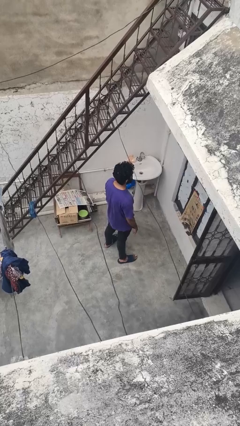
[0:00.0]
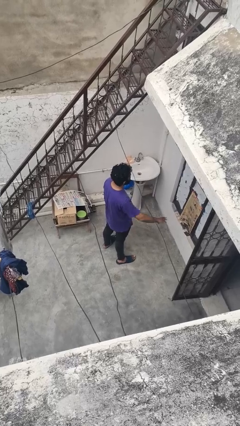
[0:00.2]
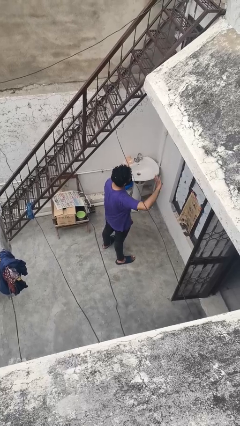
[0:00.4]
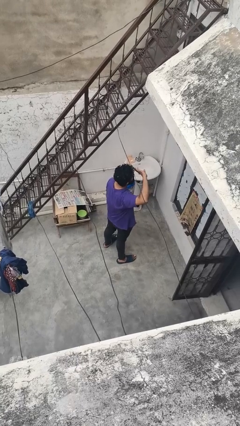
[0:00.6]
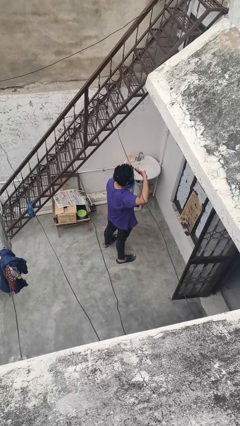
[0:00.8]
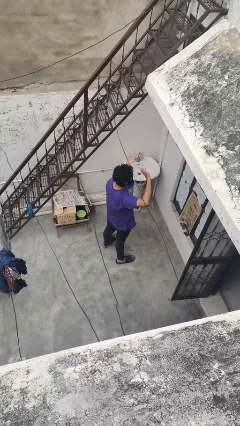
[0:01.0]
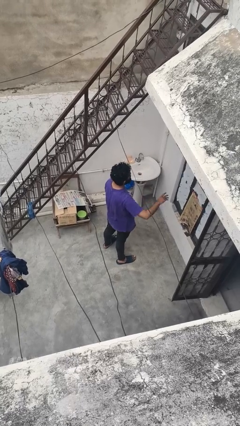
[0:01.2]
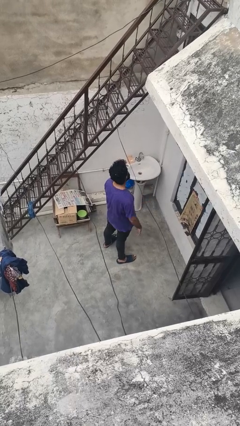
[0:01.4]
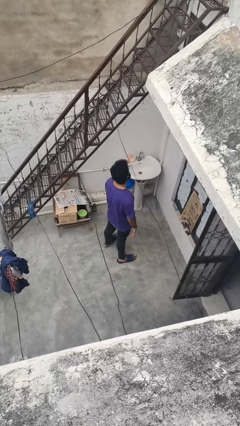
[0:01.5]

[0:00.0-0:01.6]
person salutes

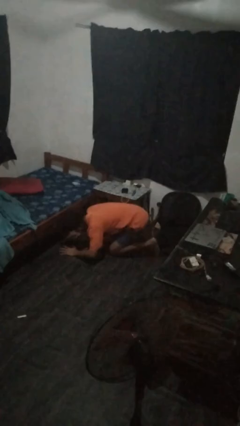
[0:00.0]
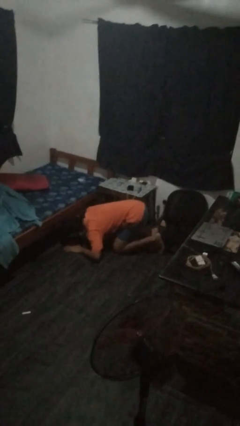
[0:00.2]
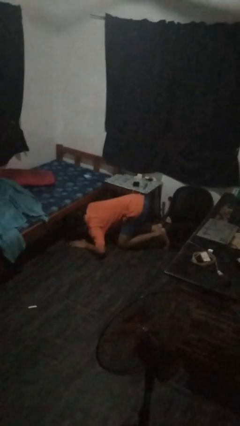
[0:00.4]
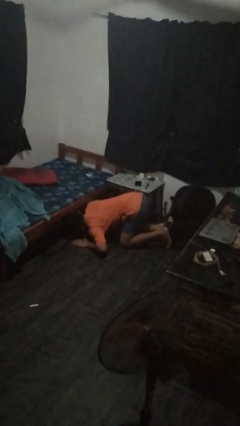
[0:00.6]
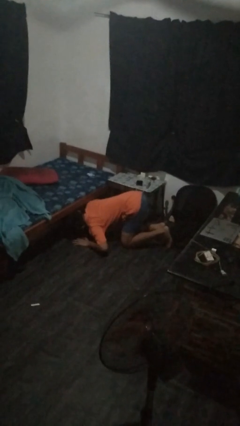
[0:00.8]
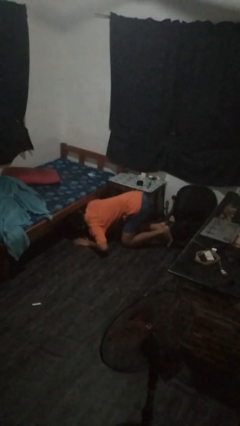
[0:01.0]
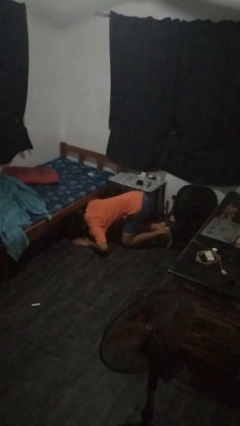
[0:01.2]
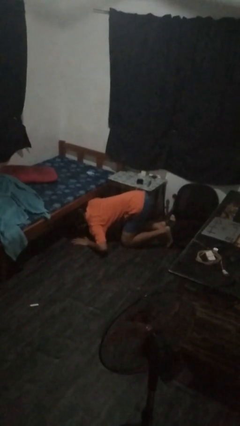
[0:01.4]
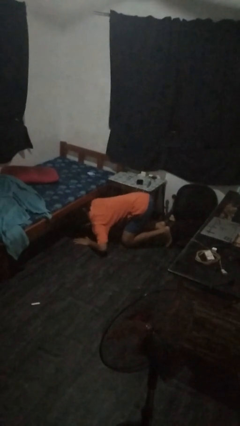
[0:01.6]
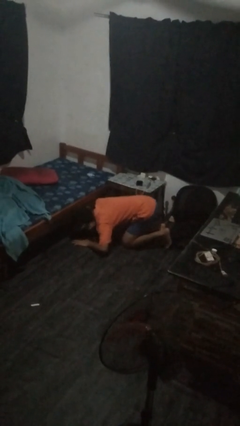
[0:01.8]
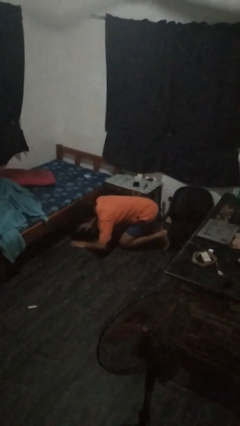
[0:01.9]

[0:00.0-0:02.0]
person searches under bed

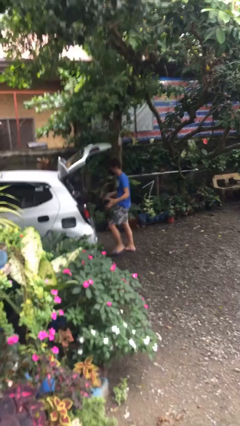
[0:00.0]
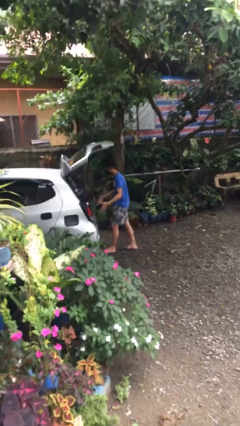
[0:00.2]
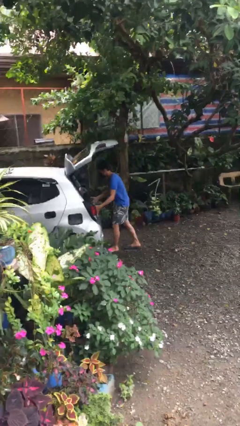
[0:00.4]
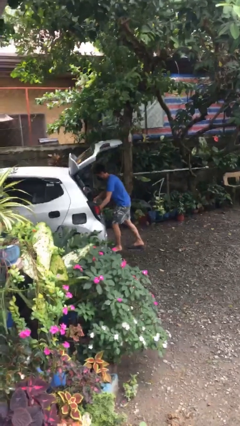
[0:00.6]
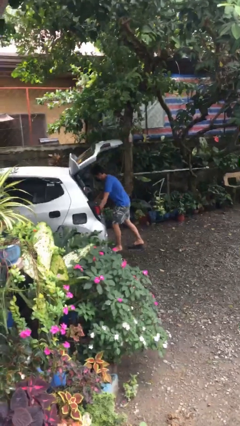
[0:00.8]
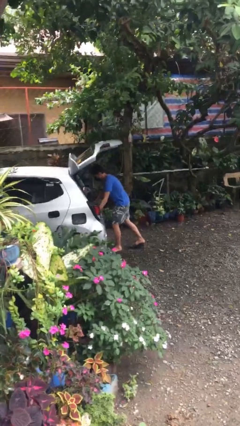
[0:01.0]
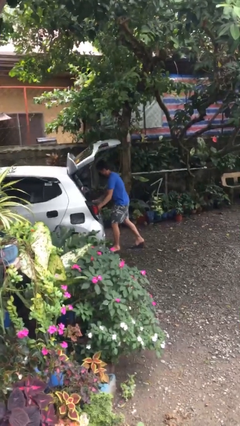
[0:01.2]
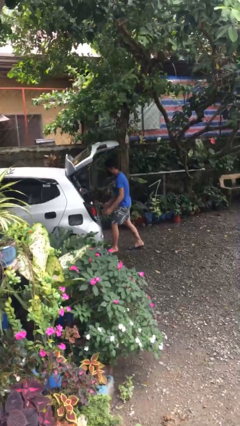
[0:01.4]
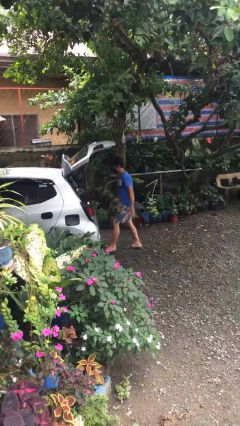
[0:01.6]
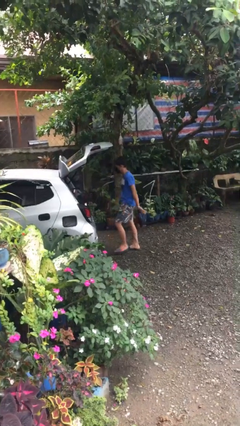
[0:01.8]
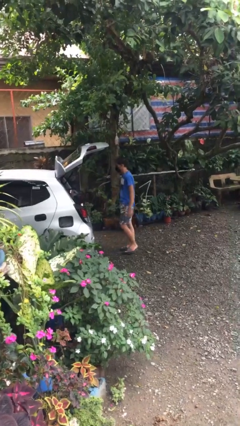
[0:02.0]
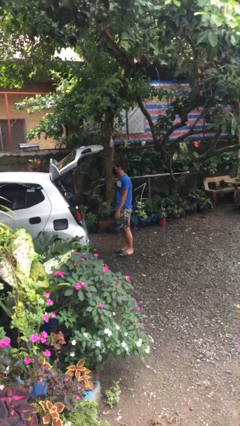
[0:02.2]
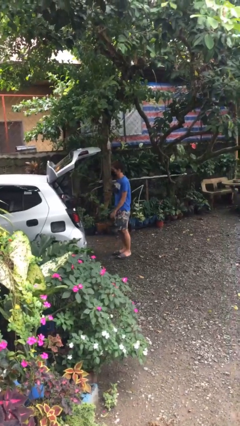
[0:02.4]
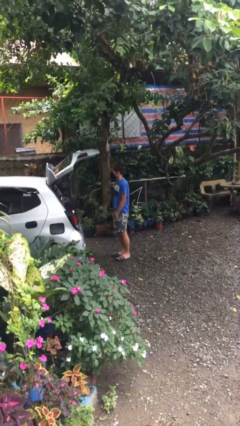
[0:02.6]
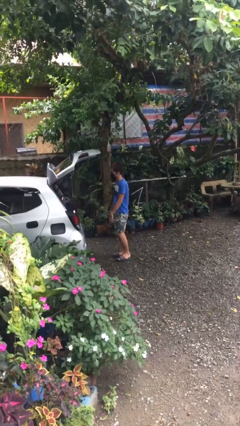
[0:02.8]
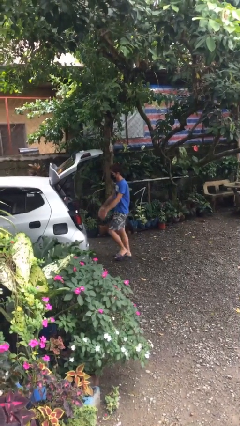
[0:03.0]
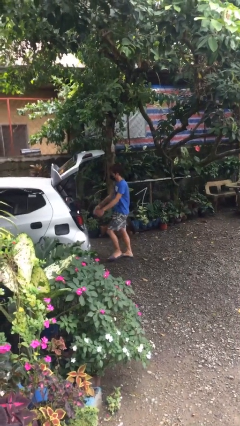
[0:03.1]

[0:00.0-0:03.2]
person loads car

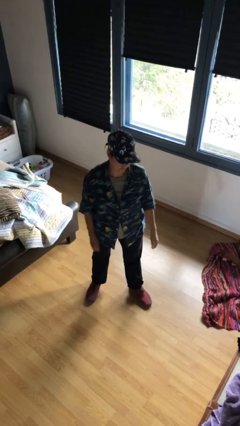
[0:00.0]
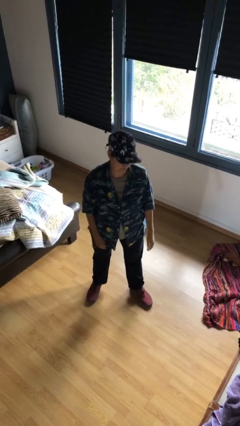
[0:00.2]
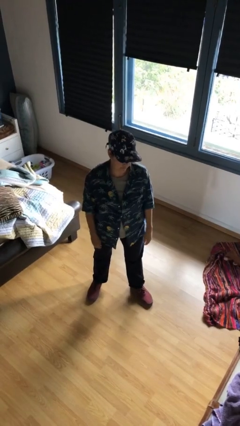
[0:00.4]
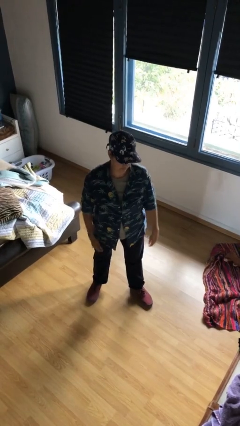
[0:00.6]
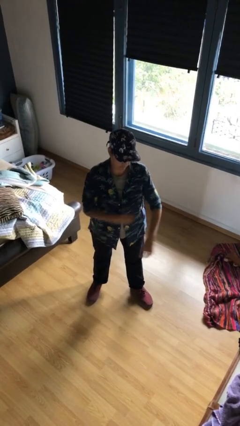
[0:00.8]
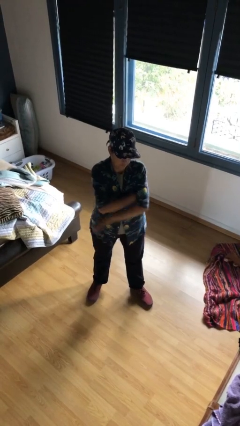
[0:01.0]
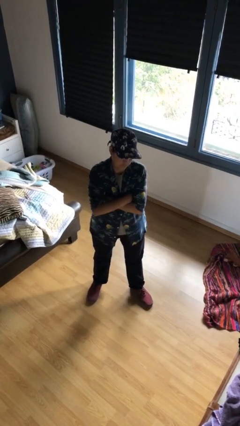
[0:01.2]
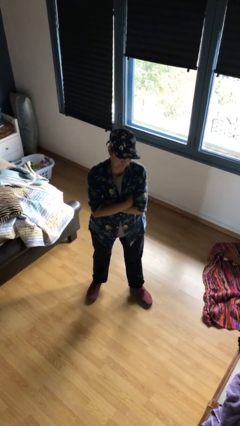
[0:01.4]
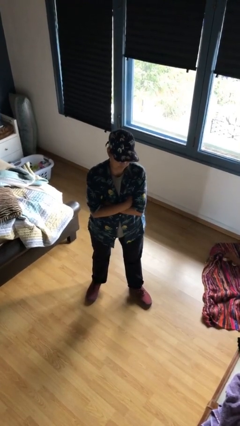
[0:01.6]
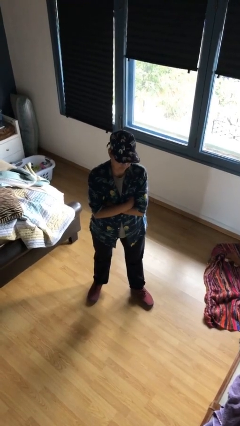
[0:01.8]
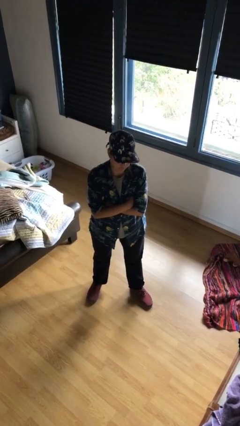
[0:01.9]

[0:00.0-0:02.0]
person crosses arms

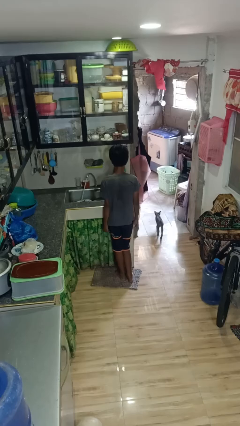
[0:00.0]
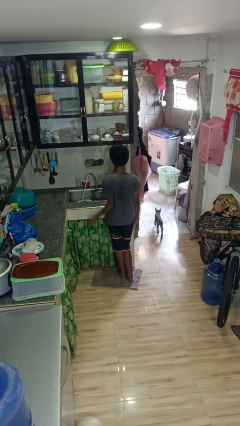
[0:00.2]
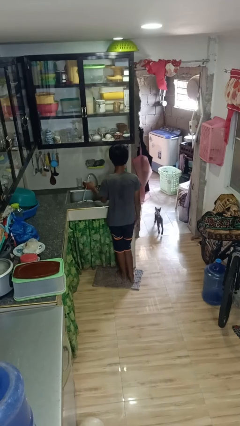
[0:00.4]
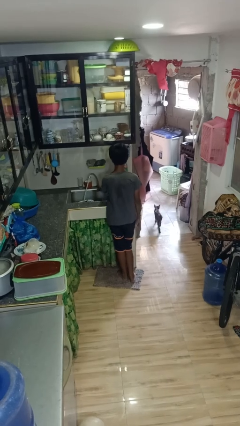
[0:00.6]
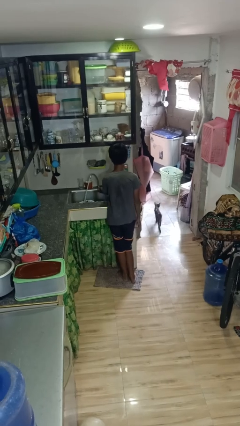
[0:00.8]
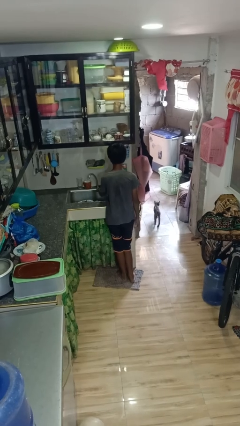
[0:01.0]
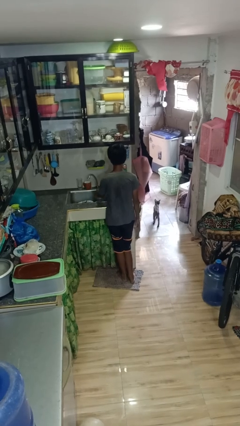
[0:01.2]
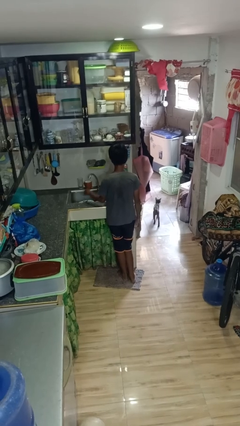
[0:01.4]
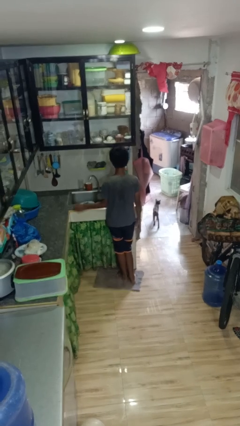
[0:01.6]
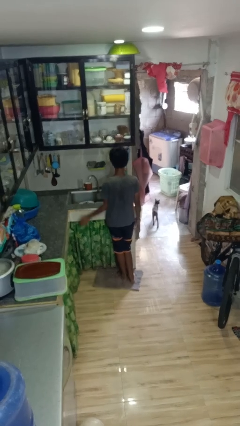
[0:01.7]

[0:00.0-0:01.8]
person turns off faucet

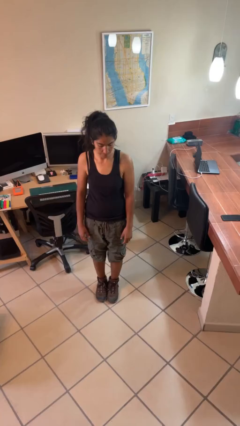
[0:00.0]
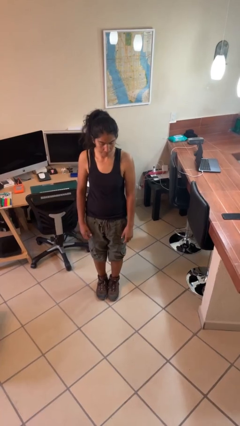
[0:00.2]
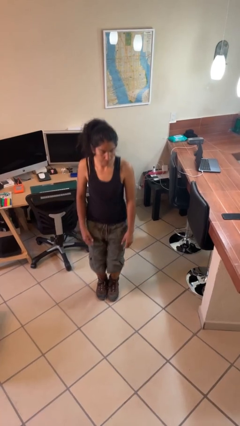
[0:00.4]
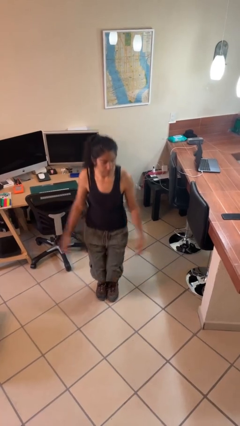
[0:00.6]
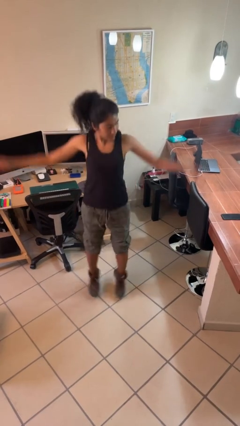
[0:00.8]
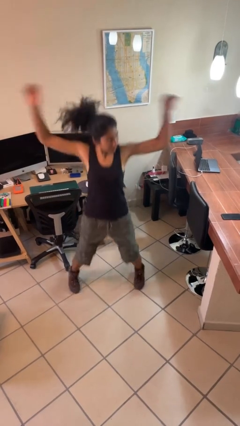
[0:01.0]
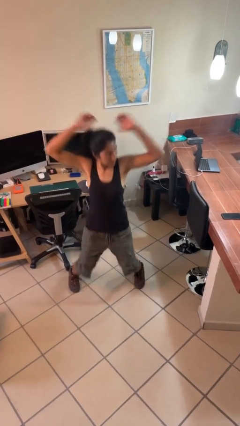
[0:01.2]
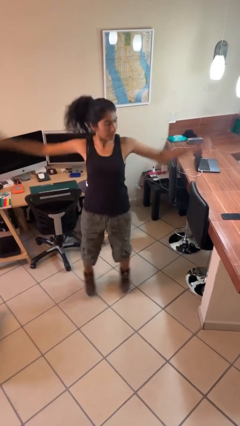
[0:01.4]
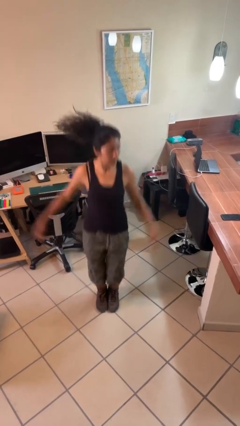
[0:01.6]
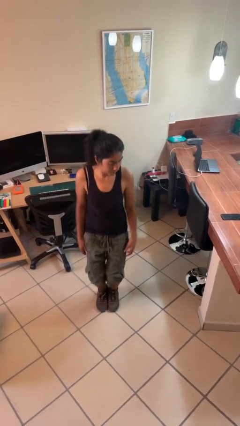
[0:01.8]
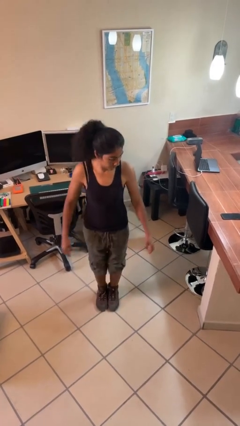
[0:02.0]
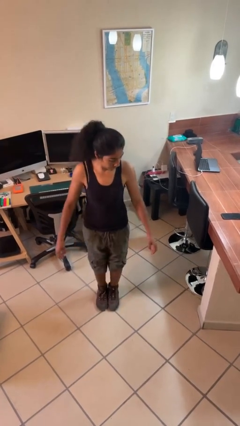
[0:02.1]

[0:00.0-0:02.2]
person exercises with jumping jacks

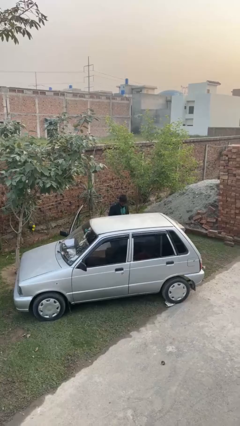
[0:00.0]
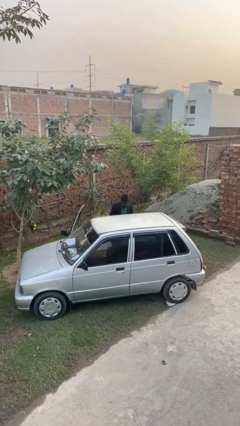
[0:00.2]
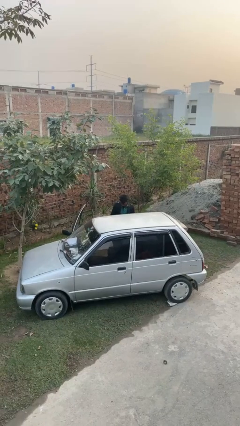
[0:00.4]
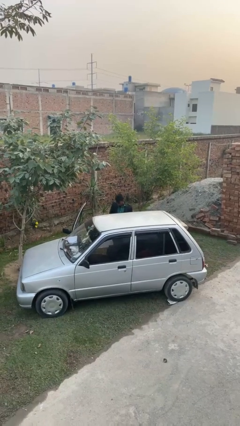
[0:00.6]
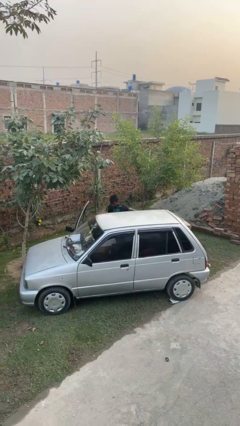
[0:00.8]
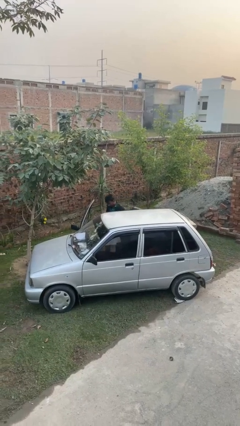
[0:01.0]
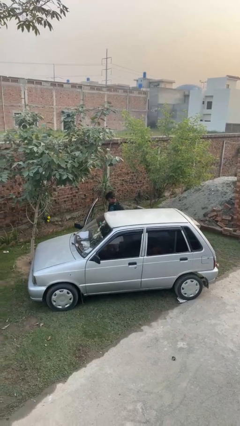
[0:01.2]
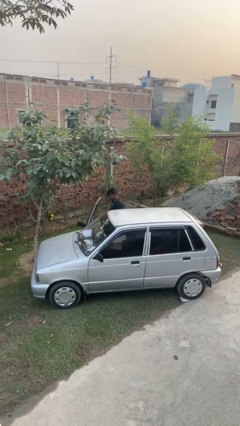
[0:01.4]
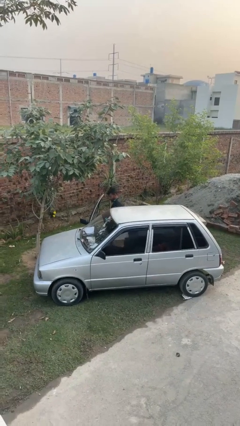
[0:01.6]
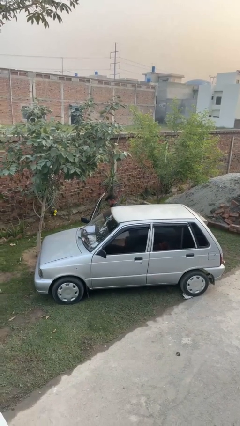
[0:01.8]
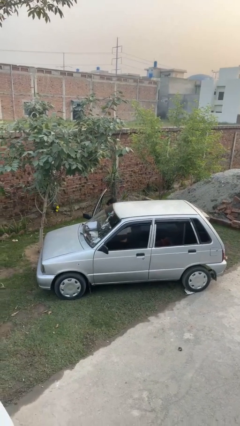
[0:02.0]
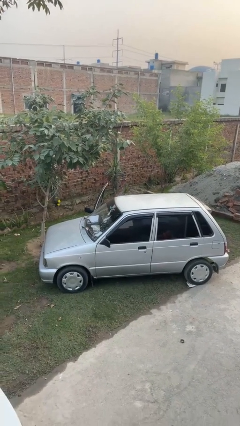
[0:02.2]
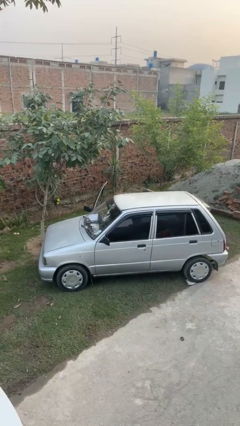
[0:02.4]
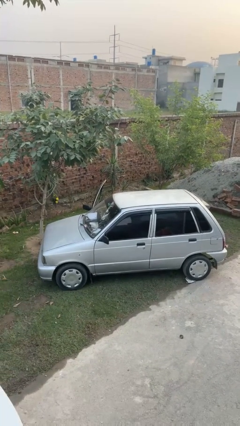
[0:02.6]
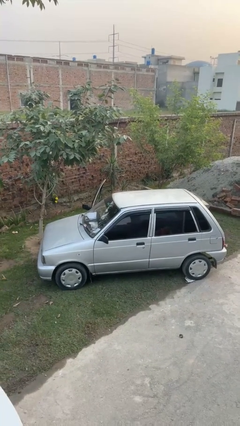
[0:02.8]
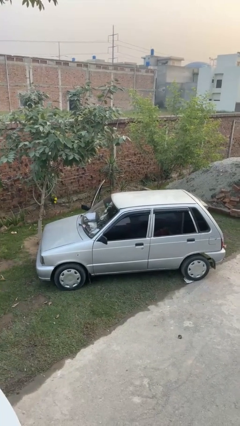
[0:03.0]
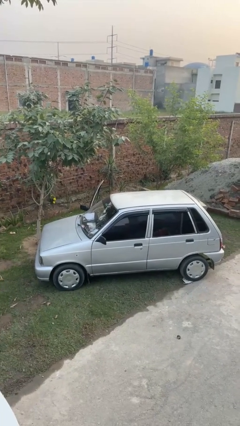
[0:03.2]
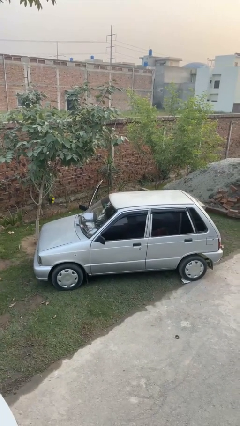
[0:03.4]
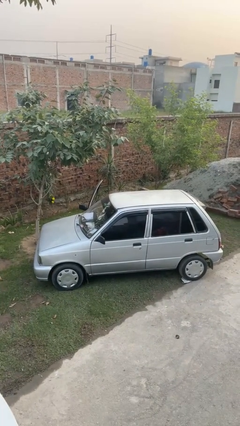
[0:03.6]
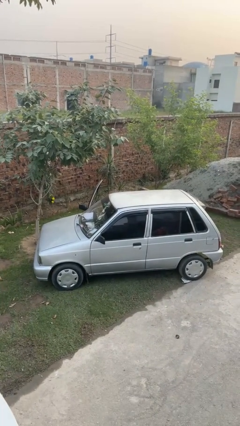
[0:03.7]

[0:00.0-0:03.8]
person enters car

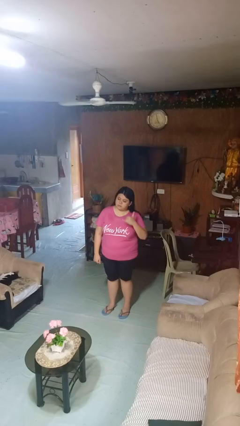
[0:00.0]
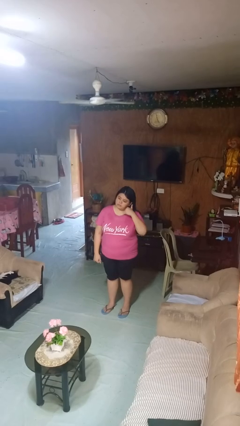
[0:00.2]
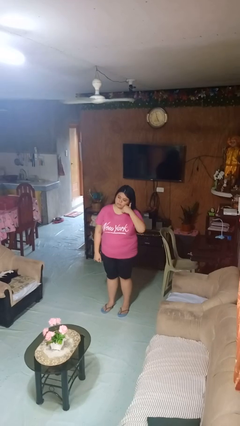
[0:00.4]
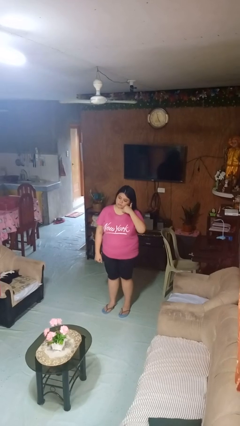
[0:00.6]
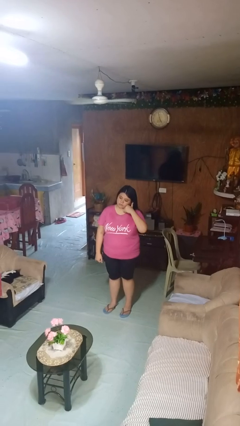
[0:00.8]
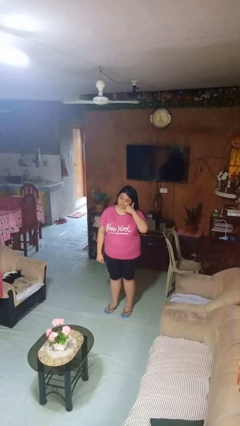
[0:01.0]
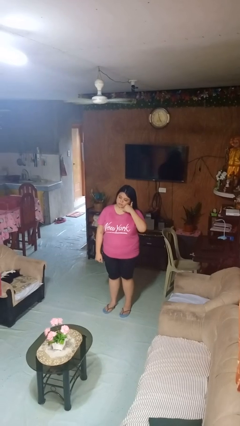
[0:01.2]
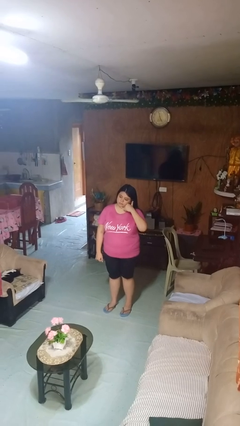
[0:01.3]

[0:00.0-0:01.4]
person gestures call me
